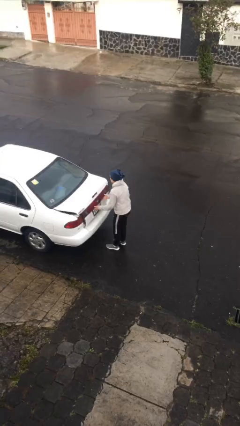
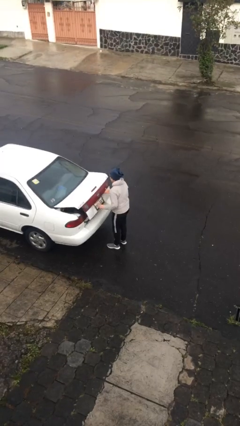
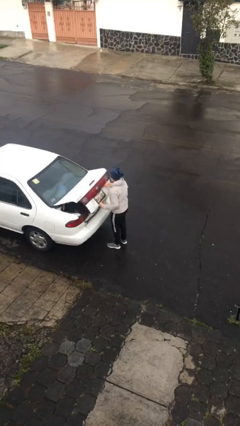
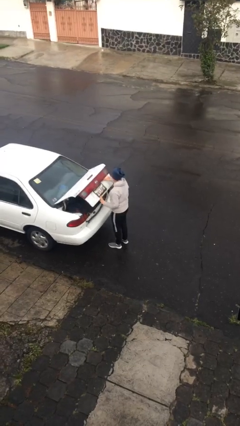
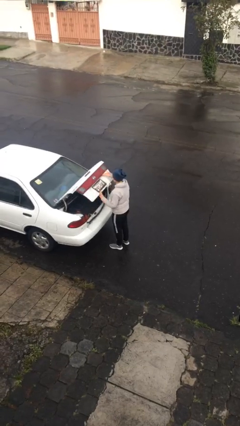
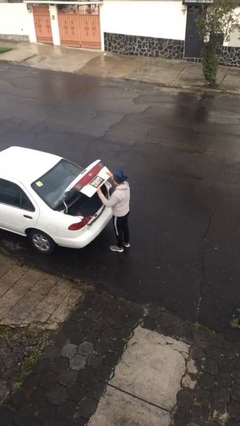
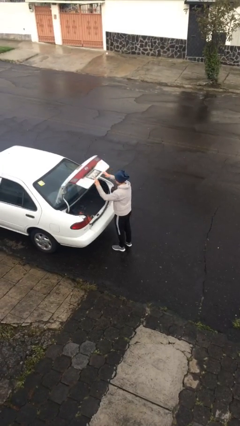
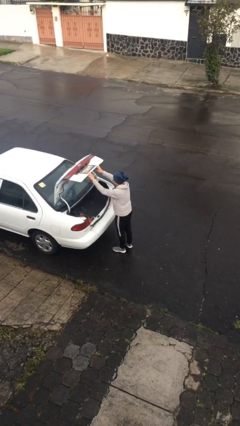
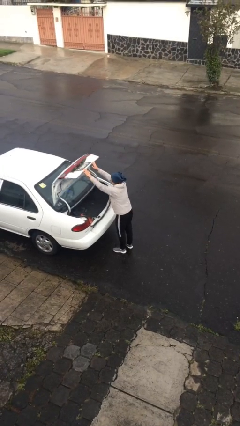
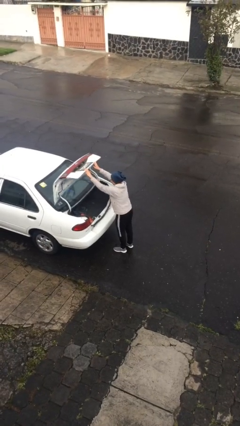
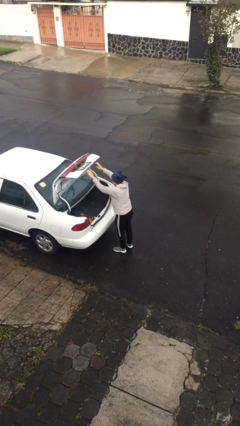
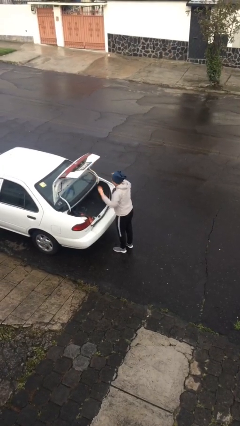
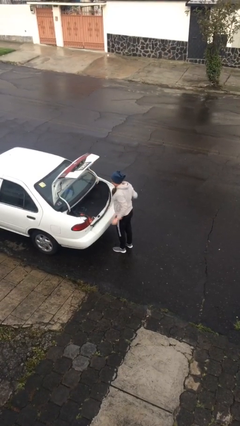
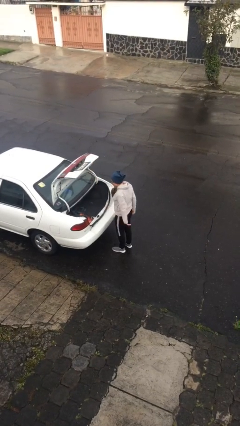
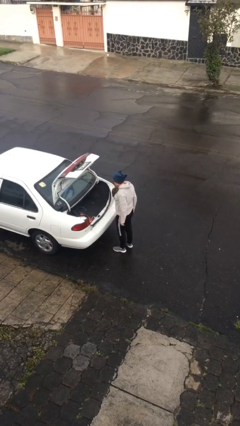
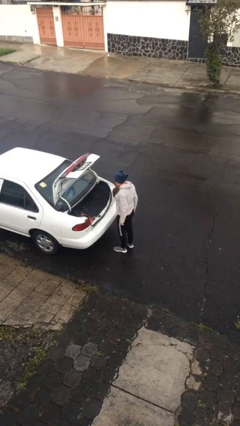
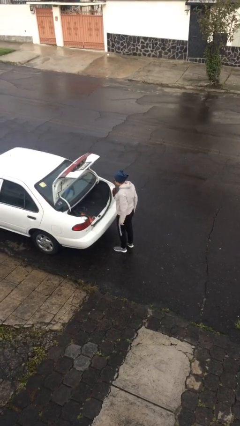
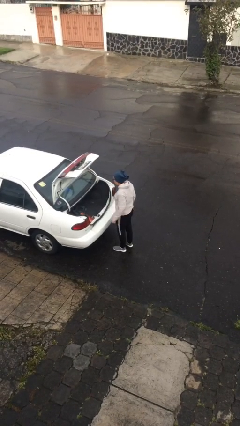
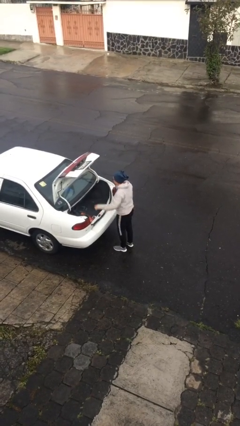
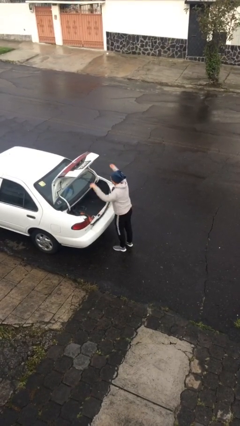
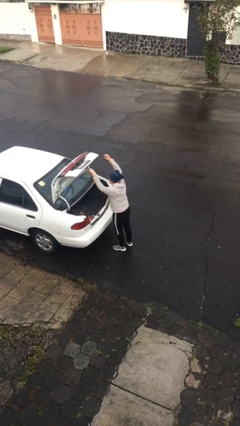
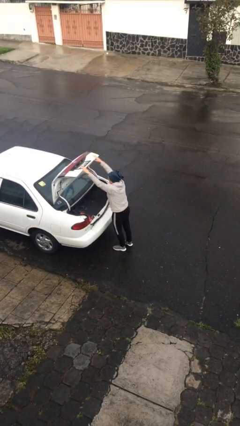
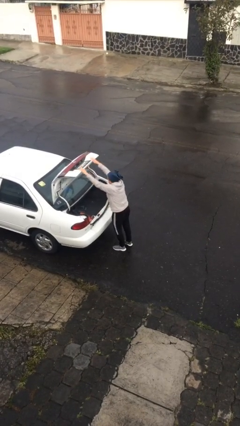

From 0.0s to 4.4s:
person opens car trunk

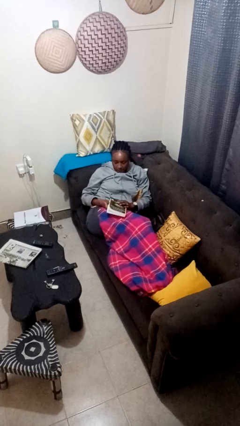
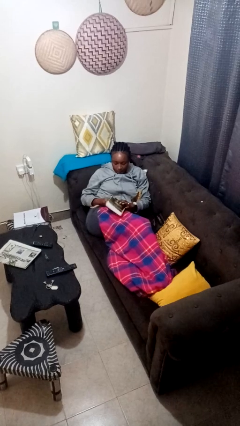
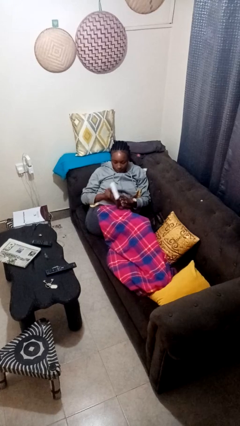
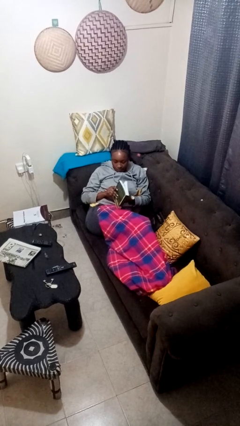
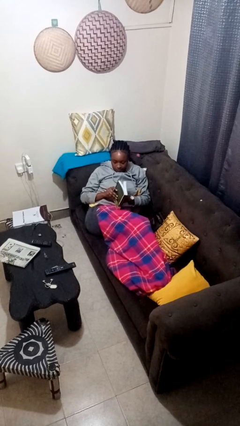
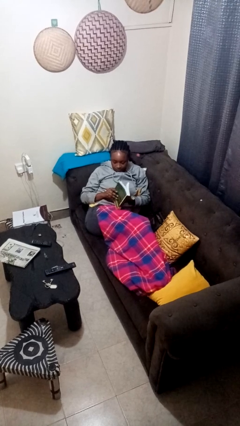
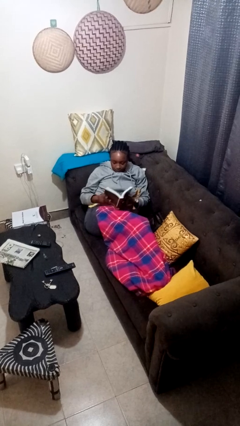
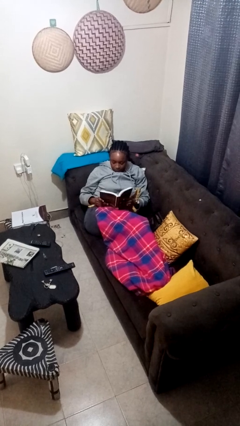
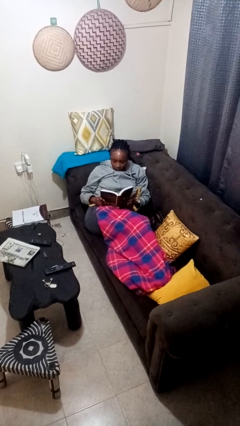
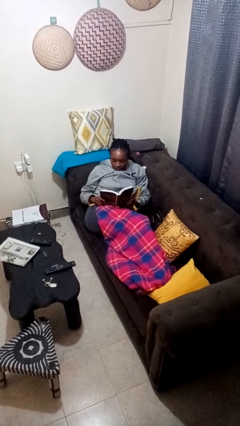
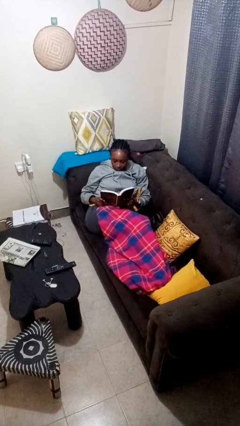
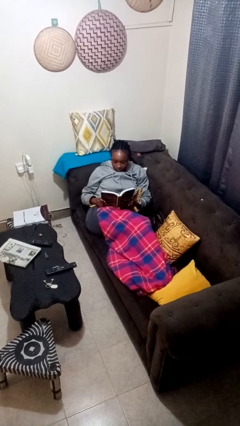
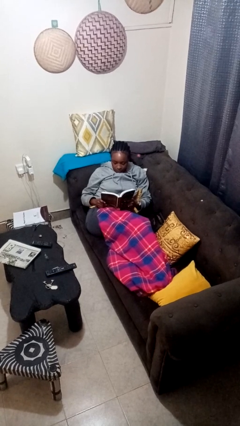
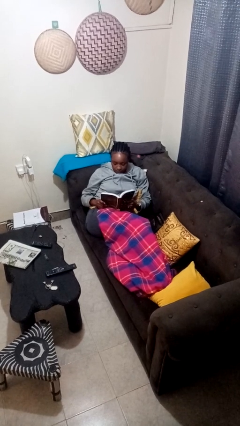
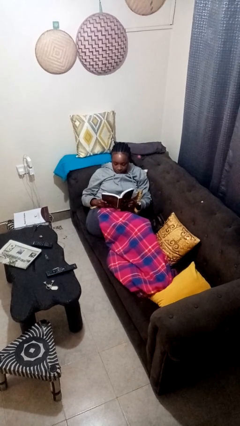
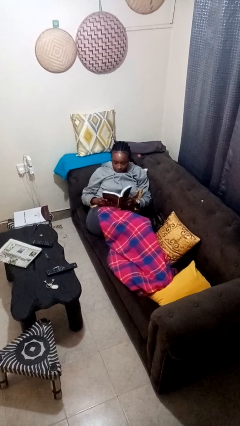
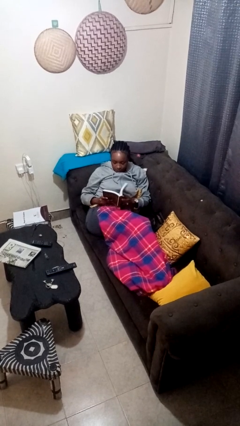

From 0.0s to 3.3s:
person reads book

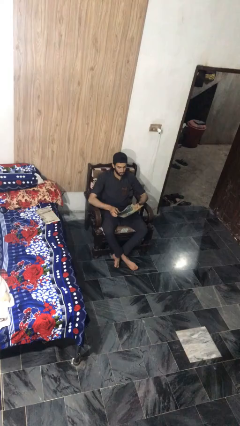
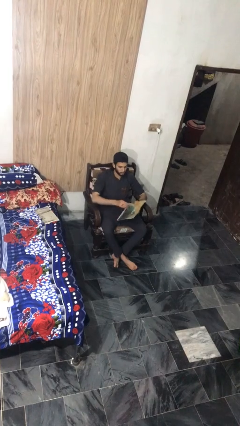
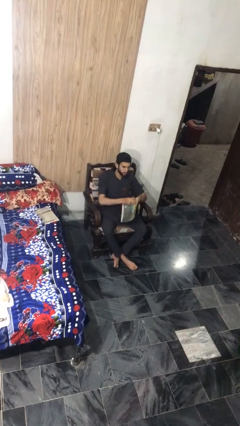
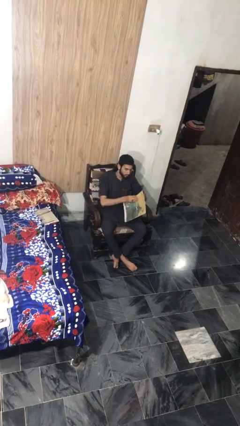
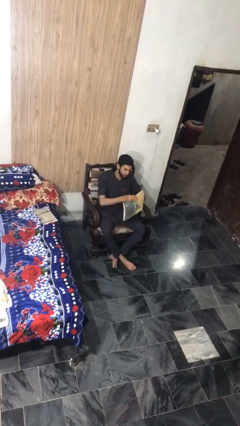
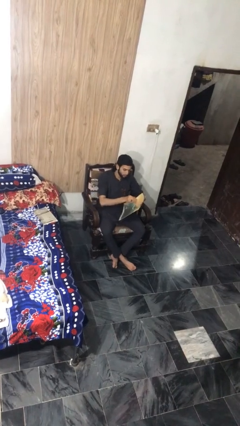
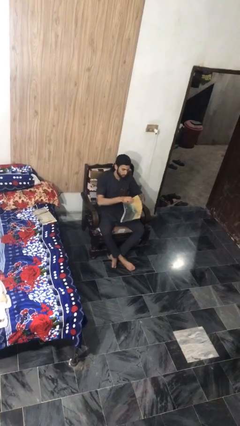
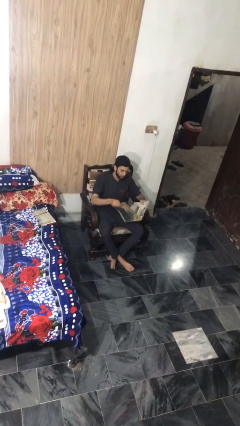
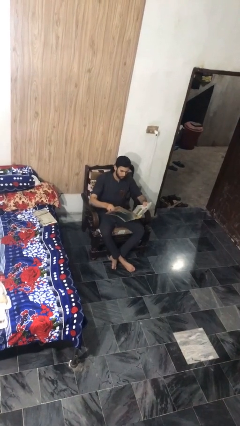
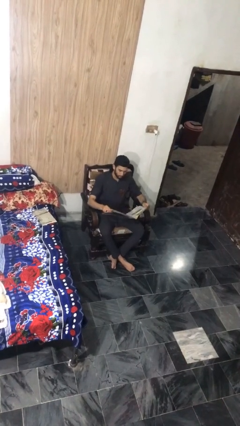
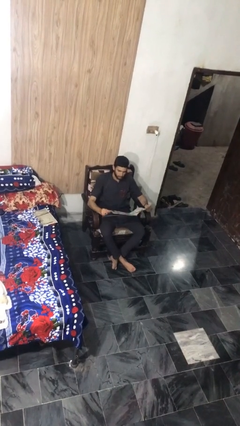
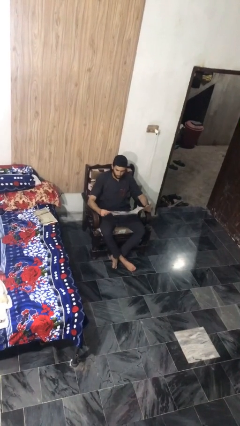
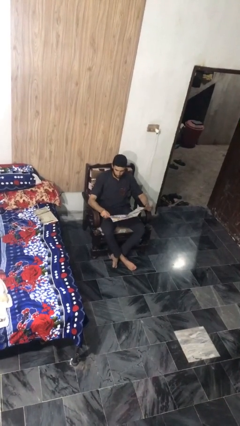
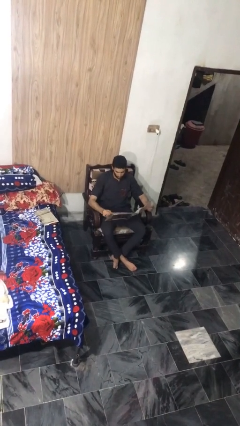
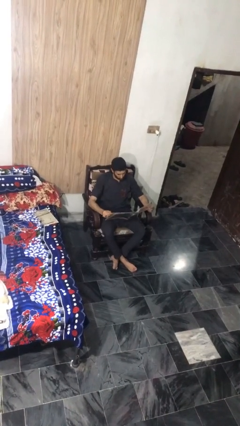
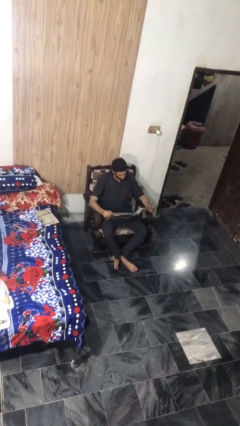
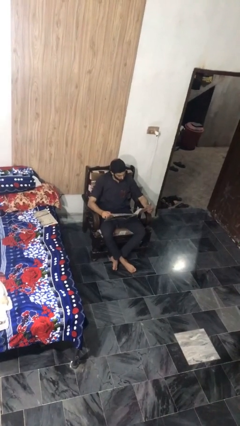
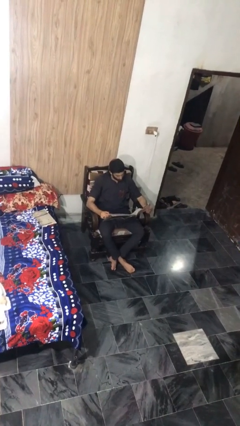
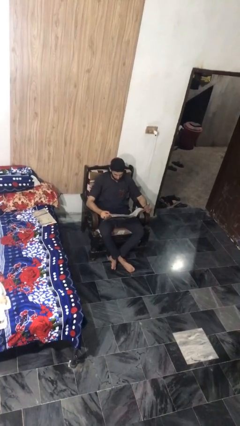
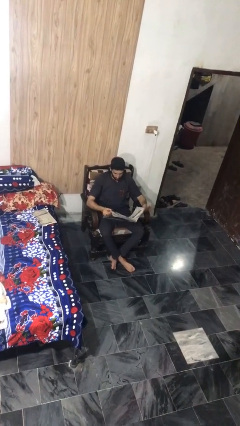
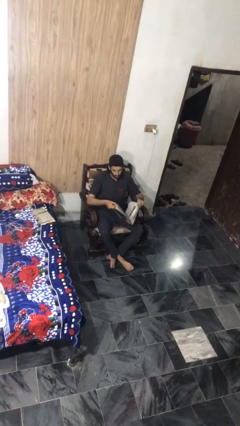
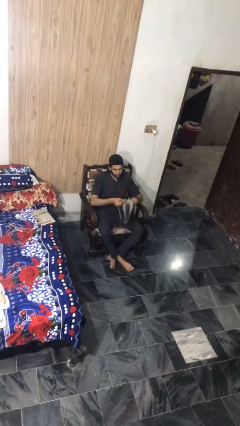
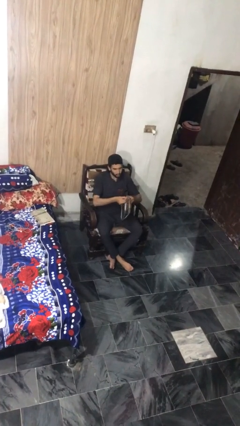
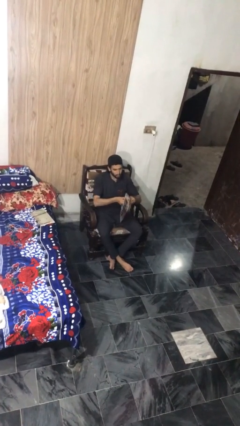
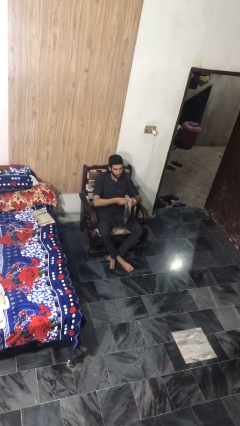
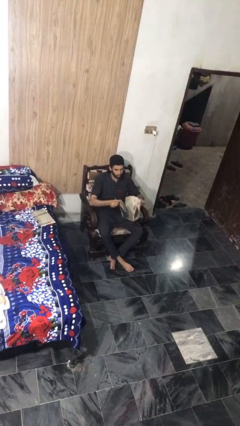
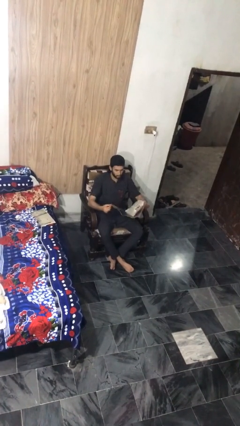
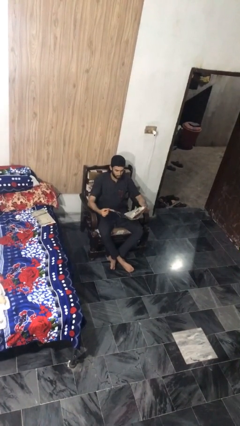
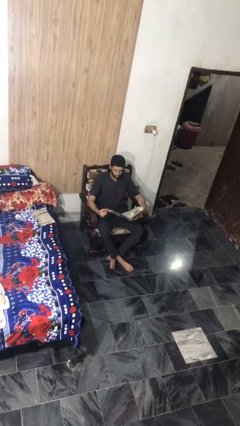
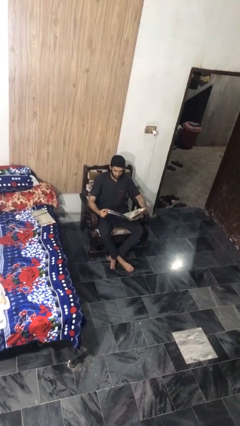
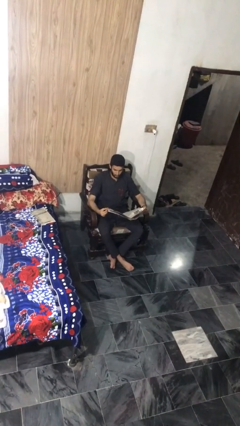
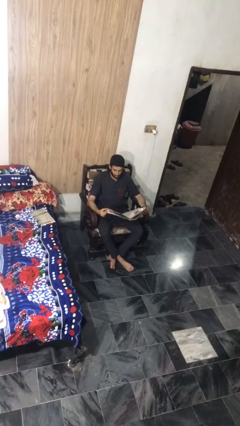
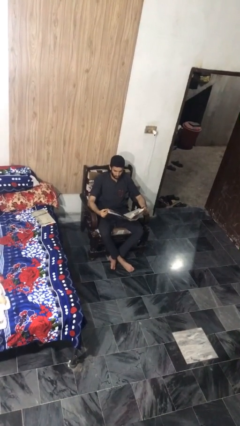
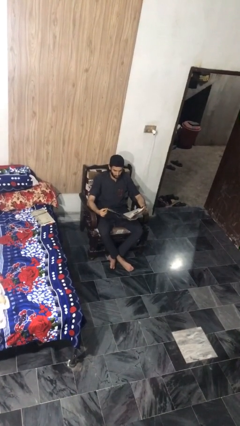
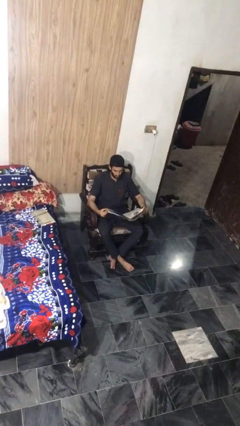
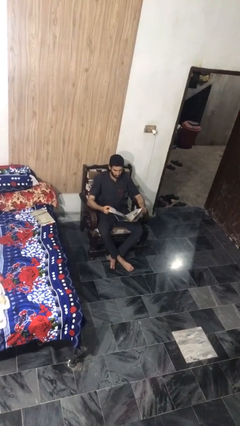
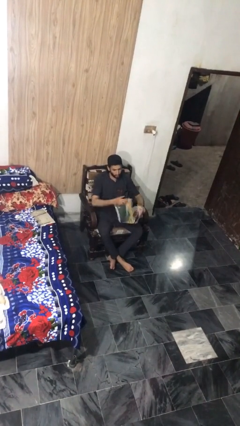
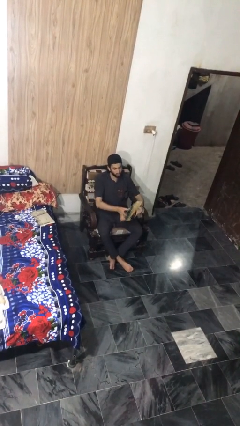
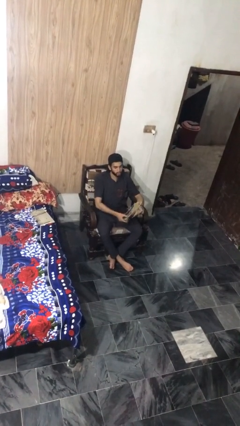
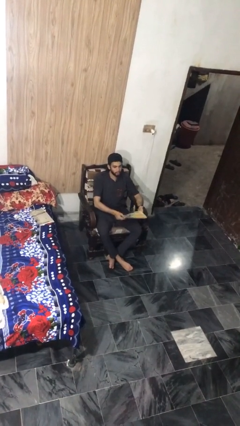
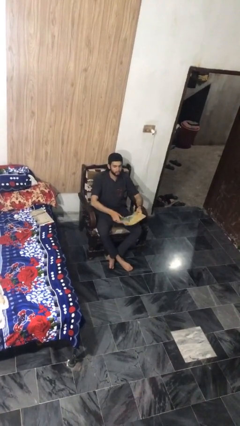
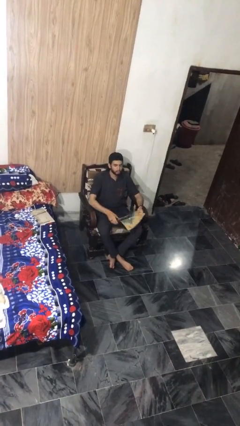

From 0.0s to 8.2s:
person reads magazine

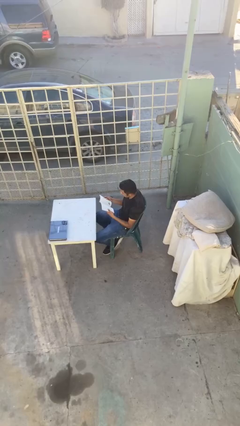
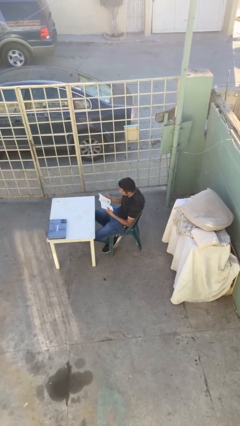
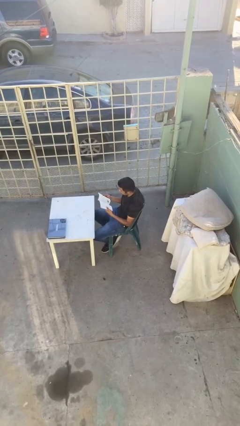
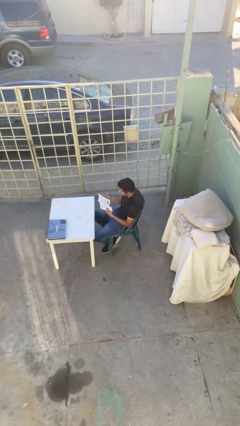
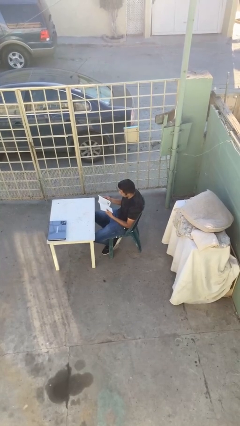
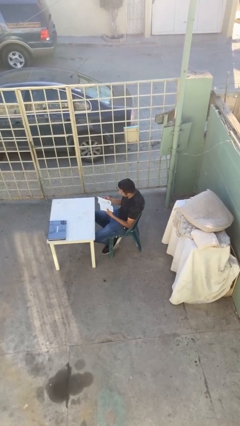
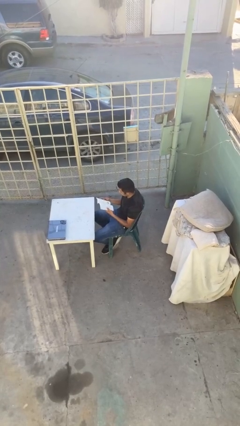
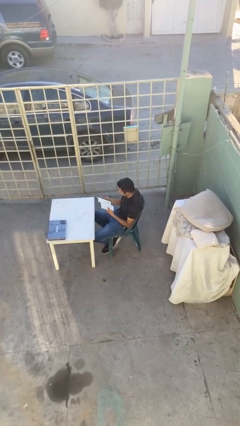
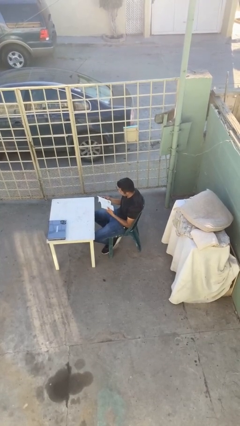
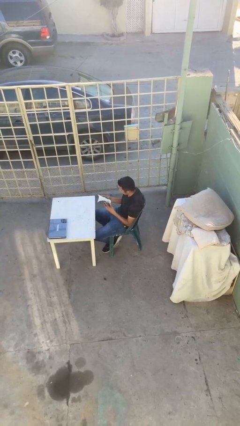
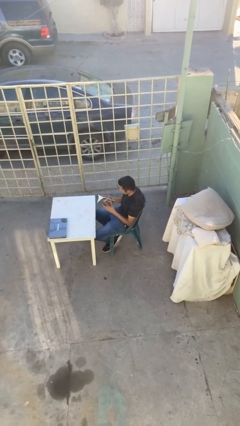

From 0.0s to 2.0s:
person reads document

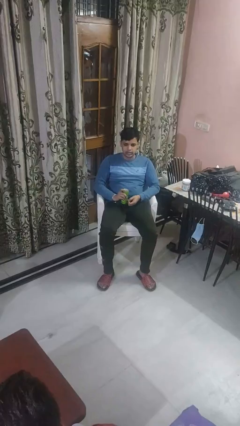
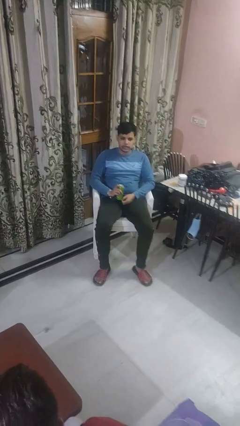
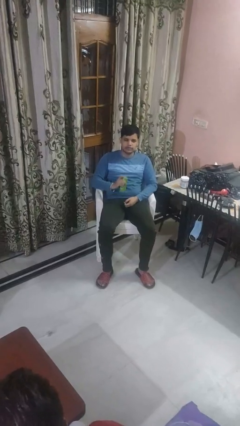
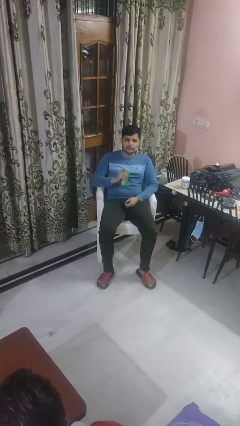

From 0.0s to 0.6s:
person opens beverage can
